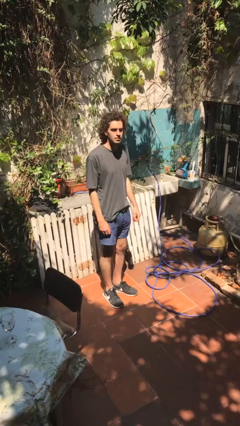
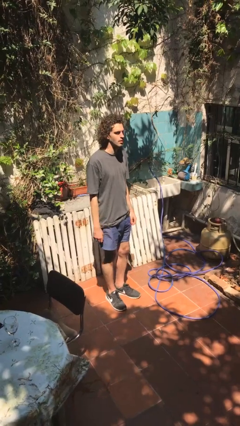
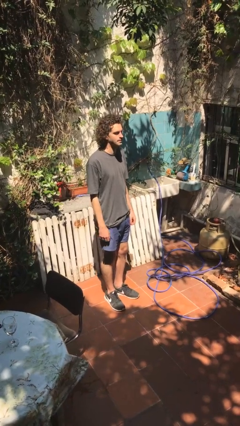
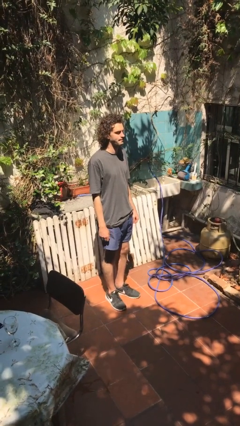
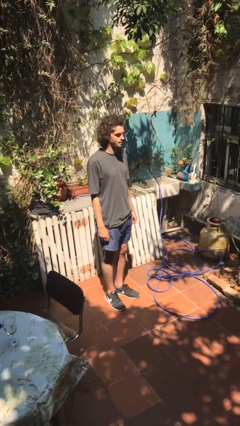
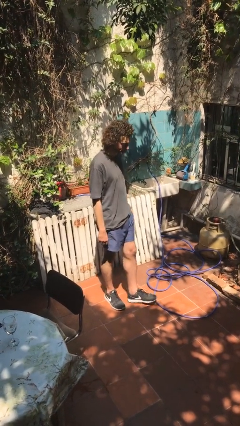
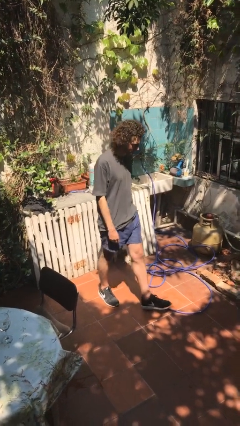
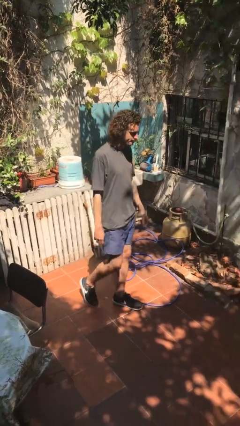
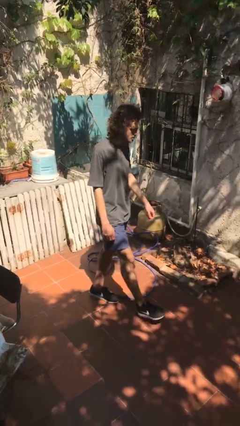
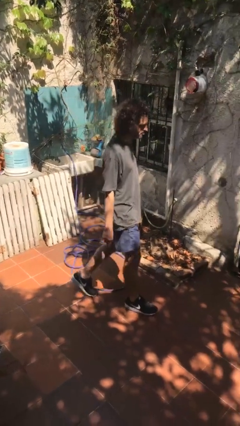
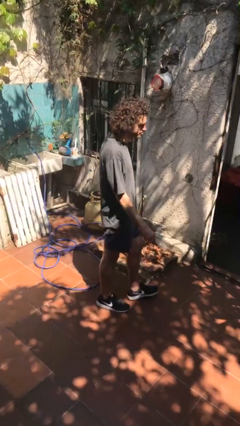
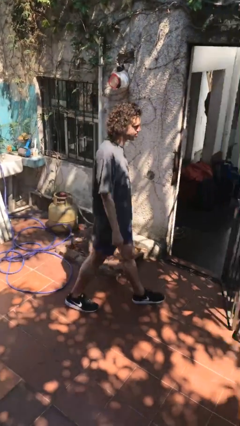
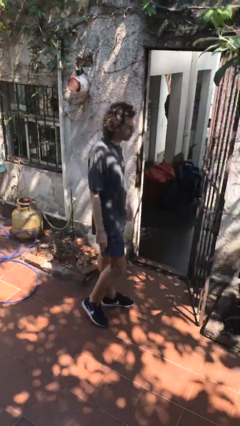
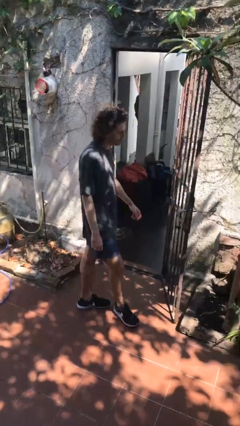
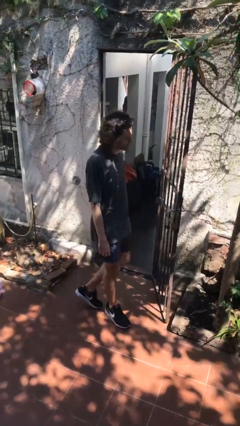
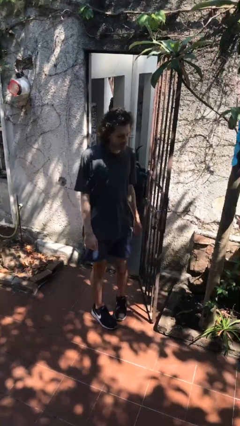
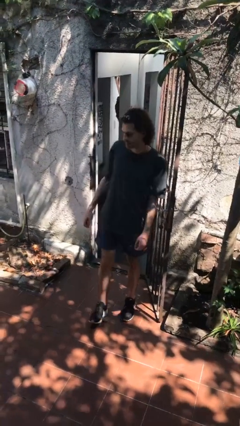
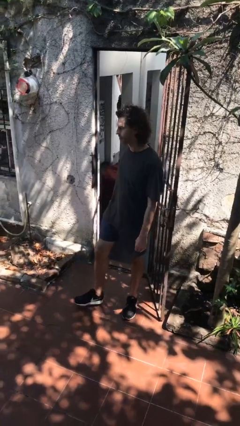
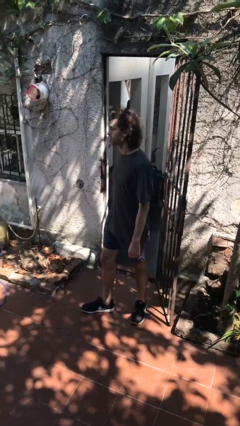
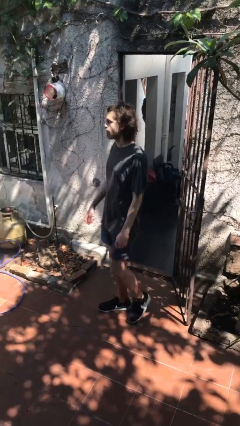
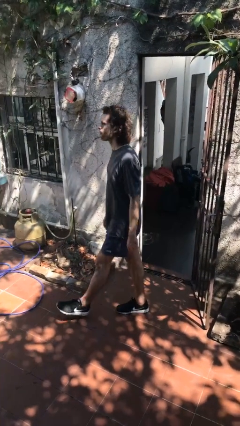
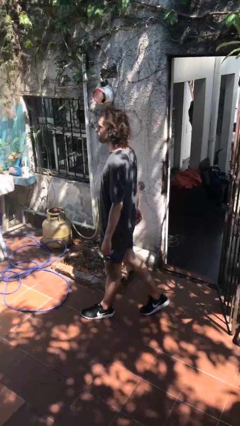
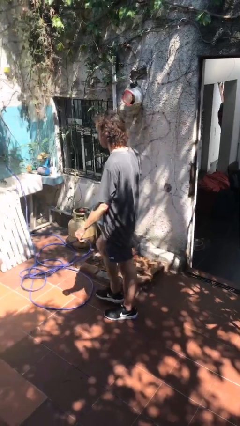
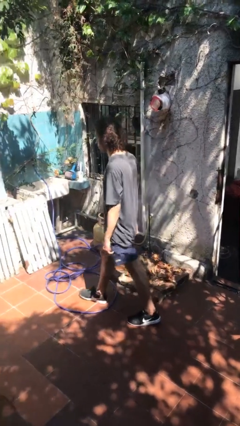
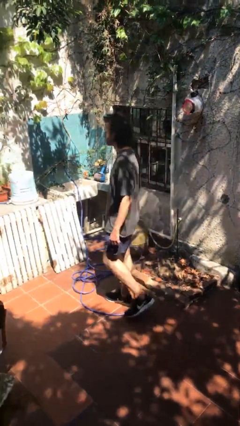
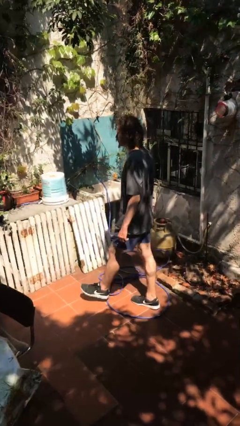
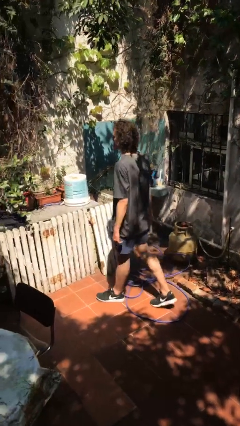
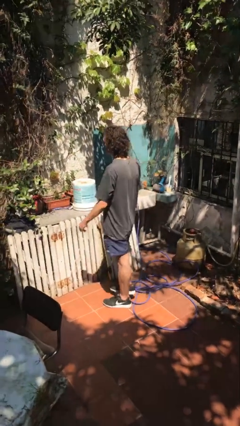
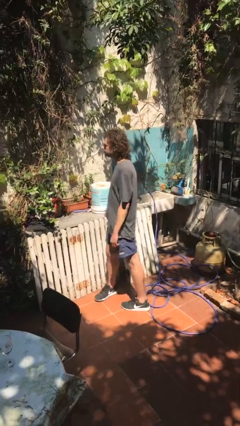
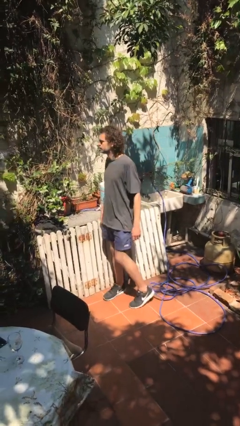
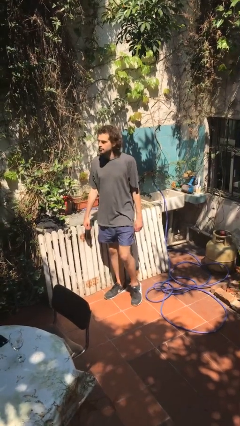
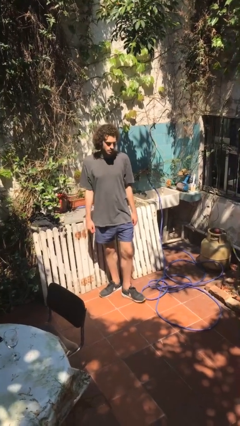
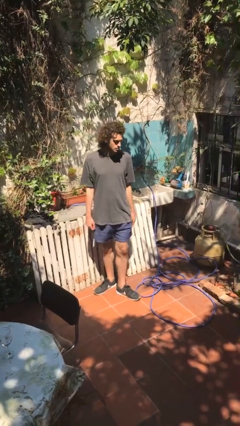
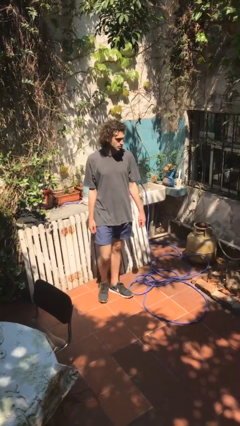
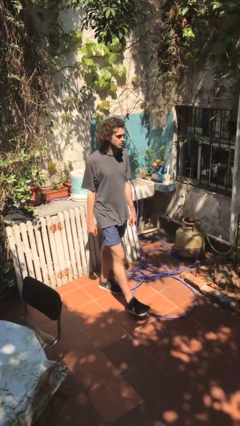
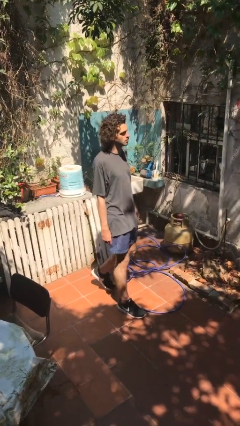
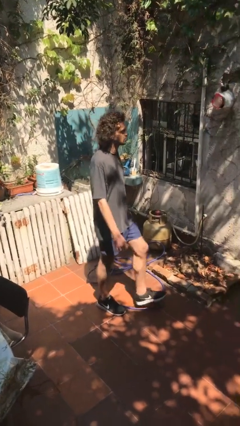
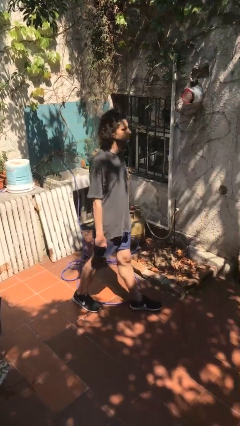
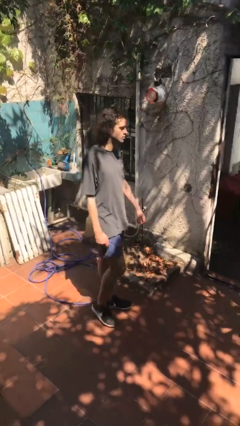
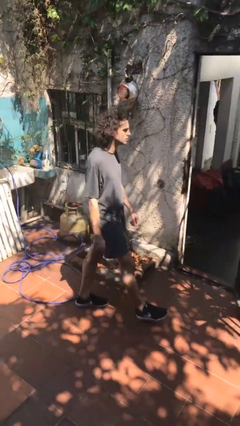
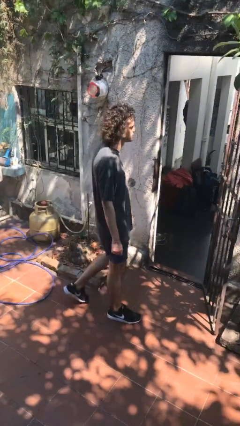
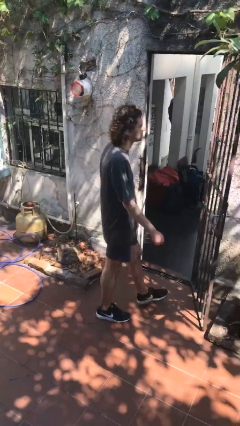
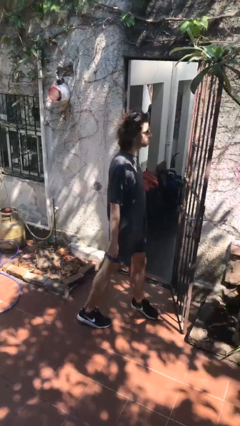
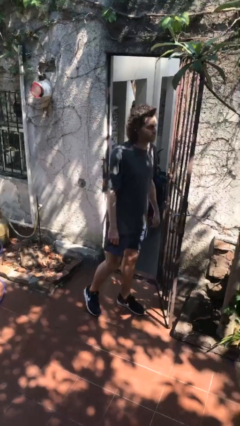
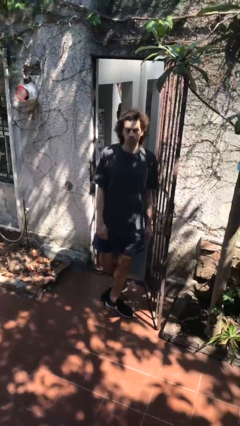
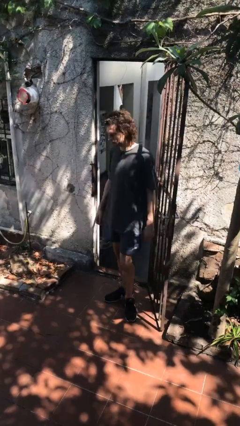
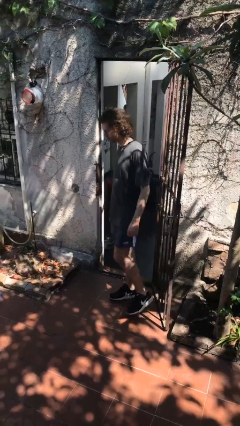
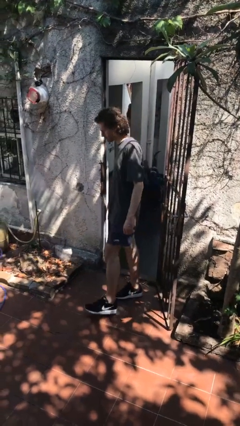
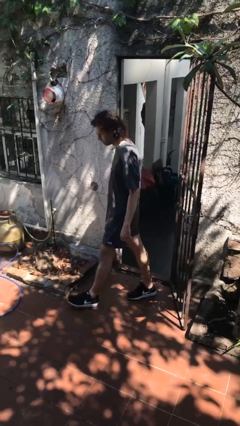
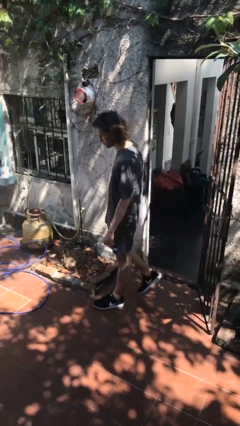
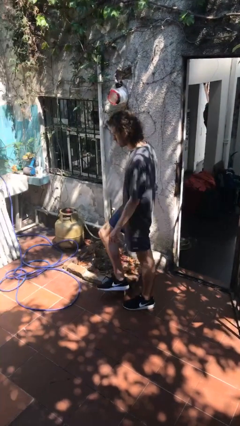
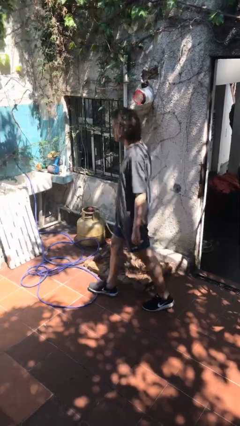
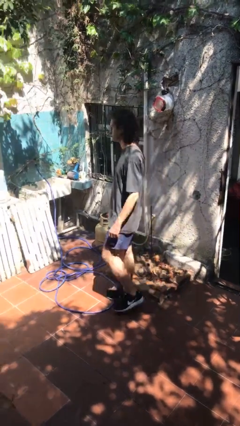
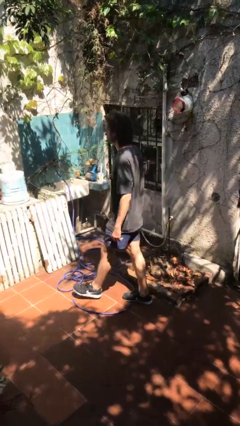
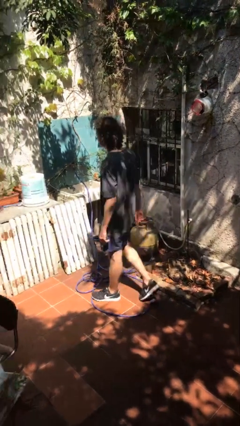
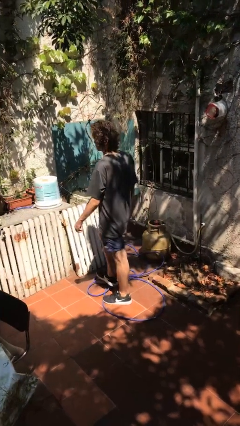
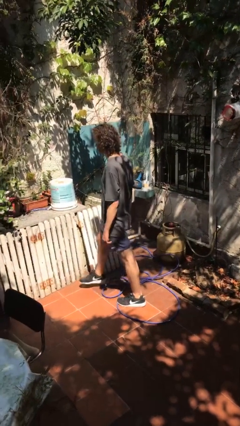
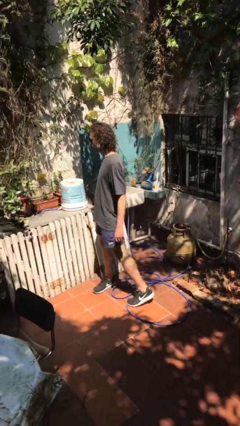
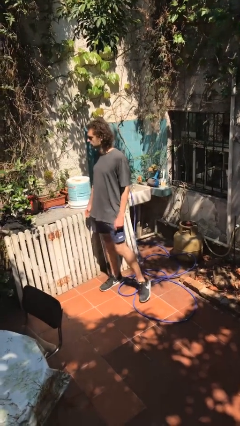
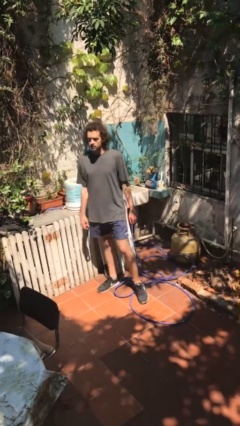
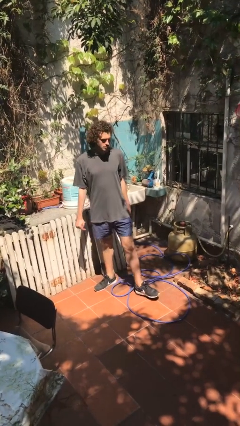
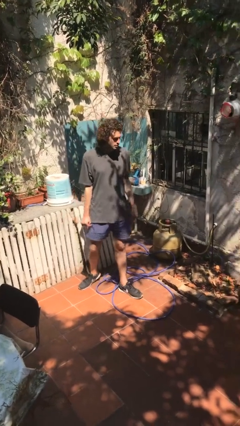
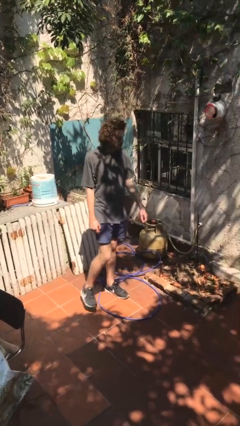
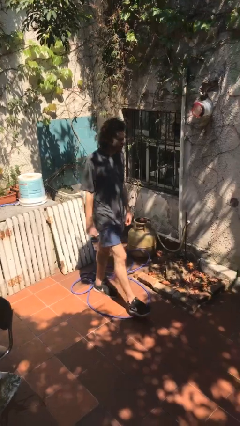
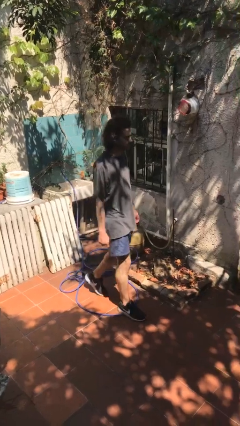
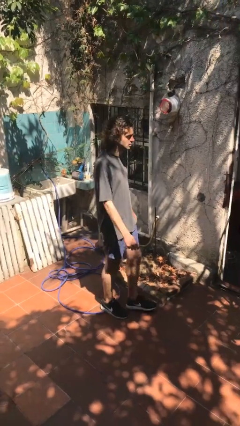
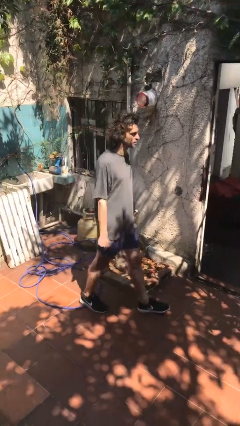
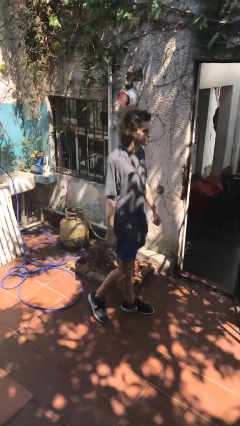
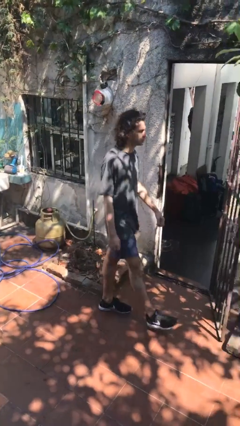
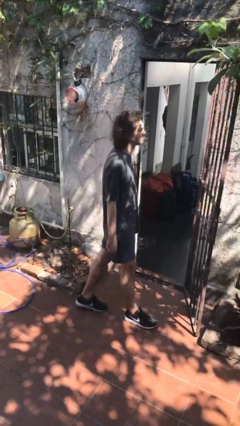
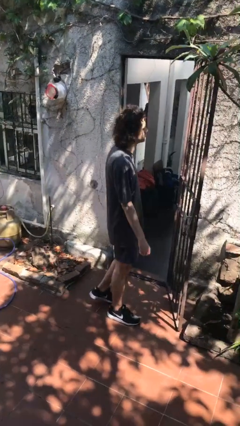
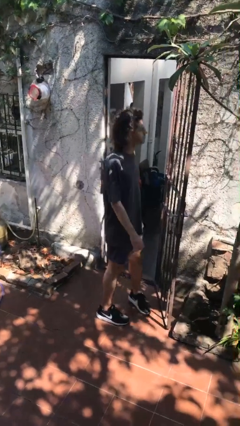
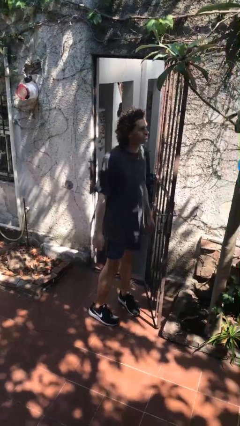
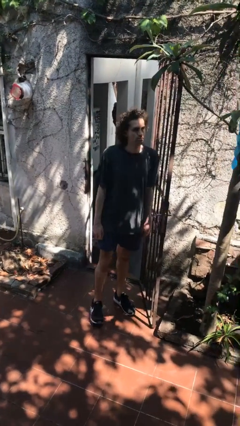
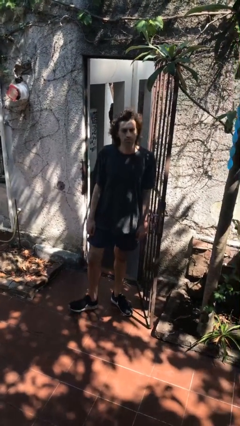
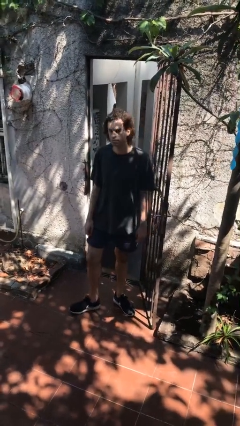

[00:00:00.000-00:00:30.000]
person walks

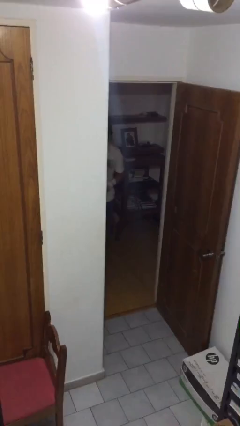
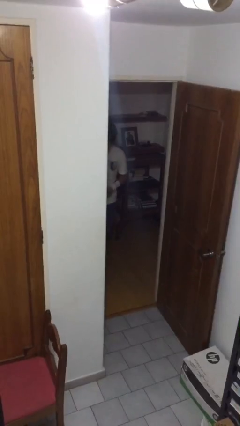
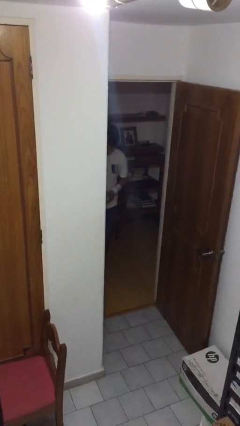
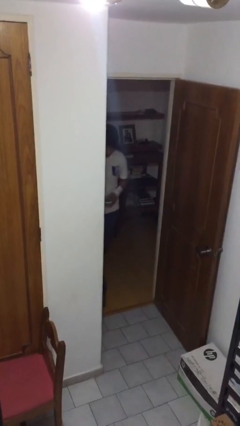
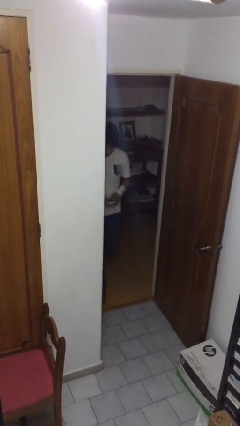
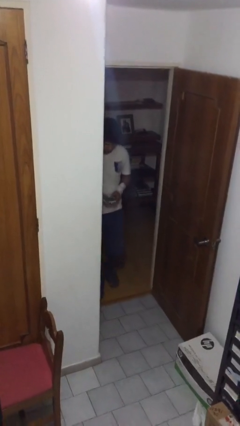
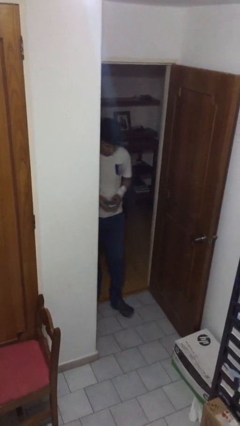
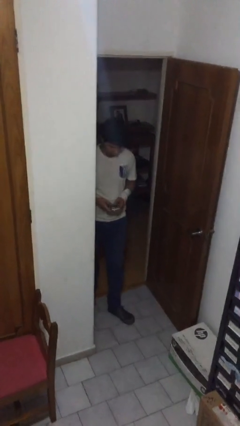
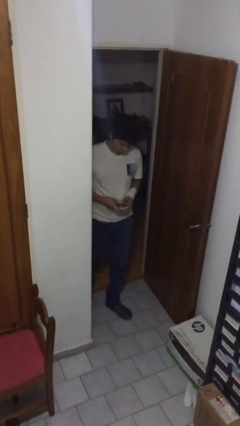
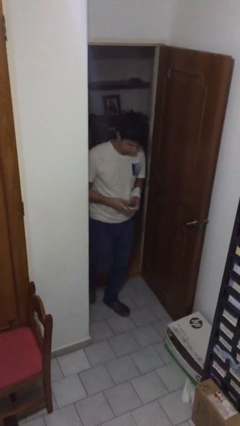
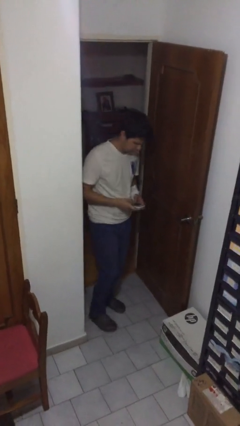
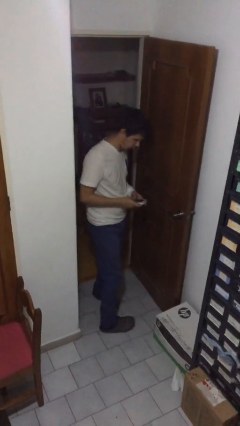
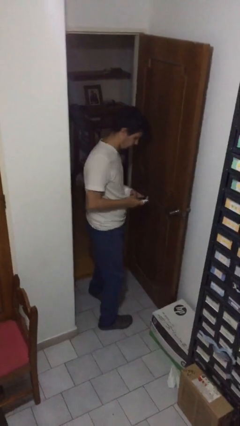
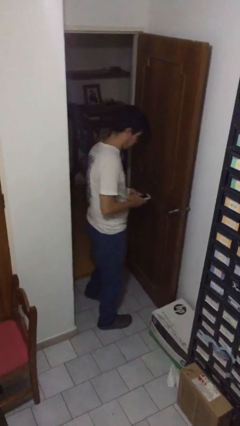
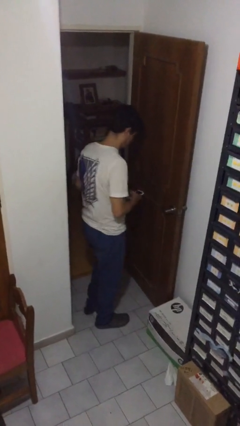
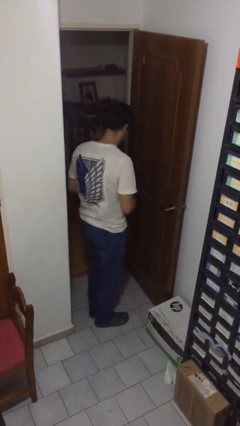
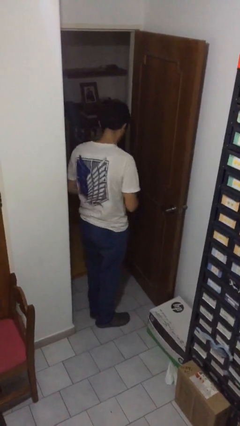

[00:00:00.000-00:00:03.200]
person enters scene through structure
